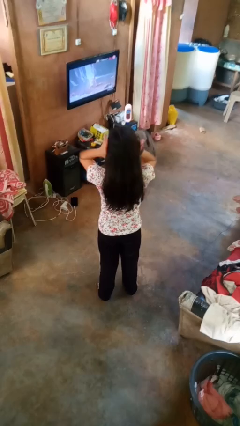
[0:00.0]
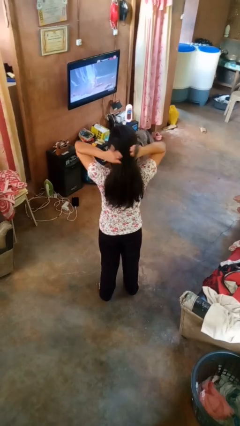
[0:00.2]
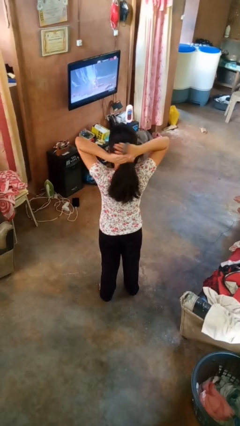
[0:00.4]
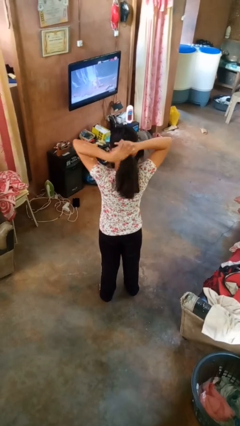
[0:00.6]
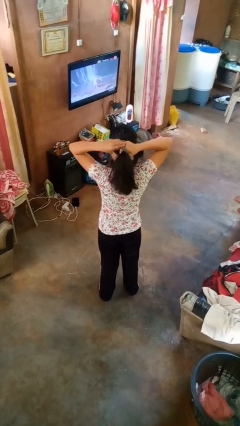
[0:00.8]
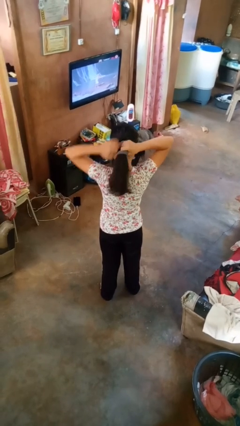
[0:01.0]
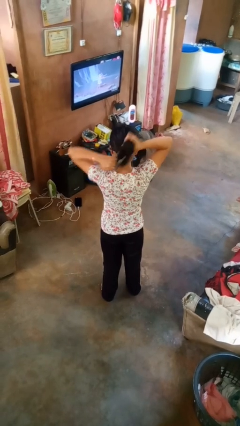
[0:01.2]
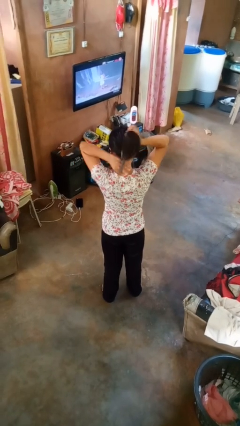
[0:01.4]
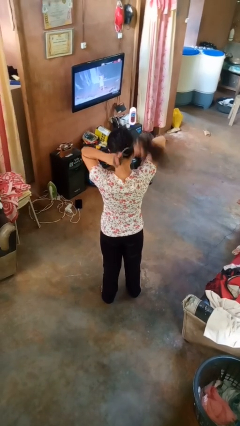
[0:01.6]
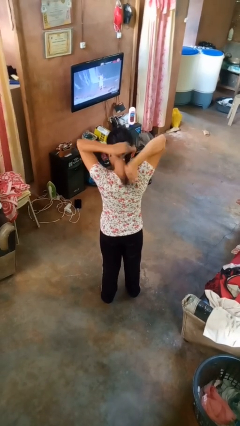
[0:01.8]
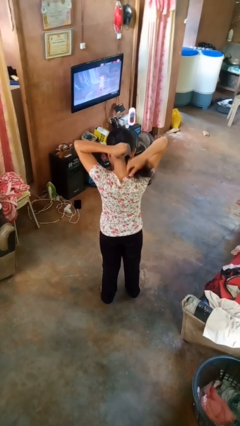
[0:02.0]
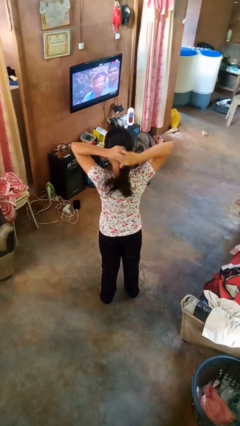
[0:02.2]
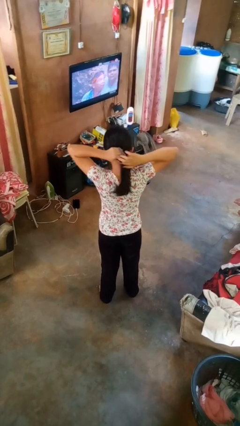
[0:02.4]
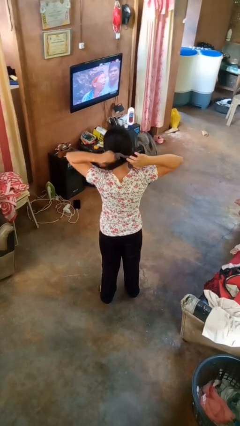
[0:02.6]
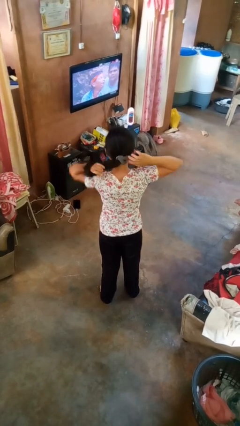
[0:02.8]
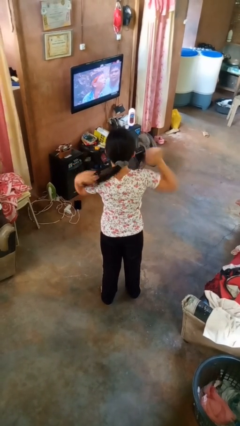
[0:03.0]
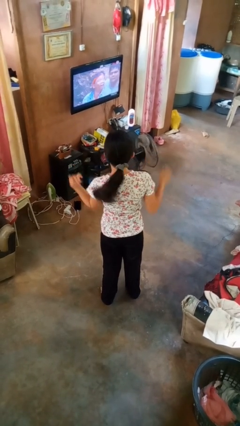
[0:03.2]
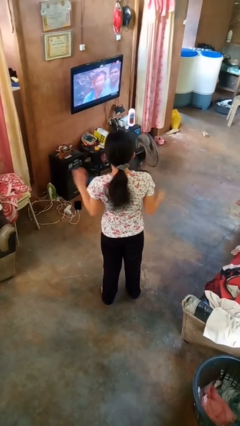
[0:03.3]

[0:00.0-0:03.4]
person puts hair in ponytail

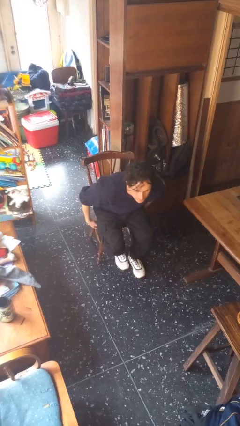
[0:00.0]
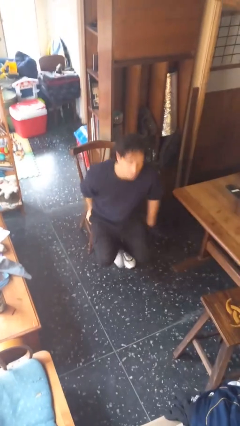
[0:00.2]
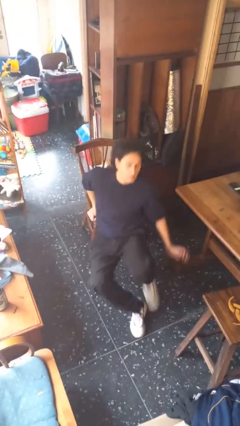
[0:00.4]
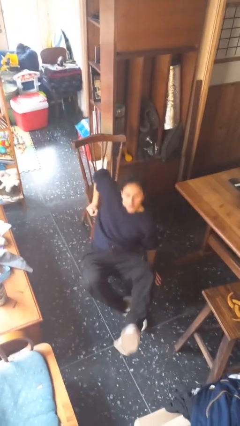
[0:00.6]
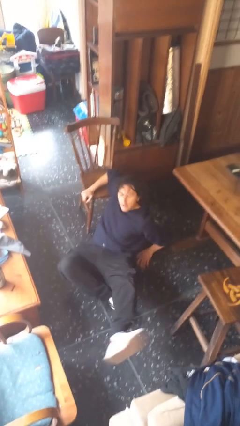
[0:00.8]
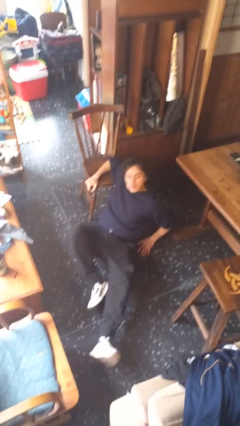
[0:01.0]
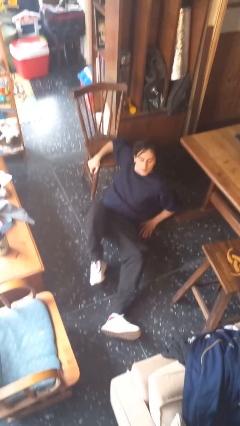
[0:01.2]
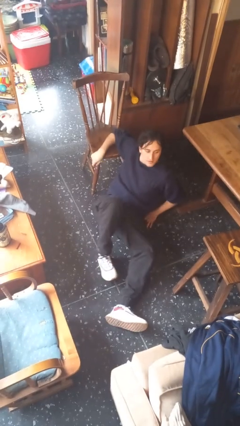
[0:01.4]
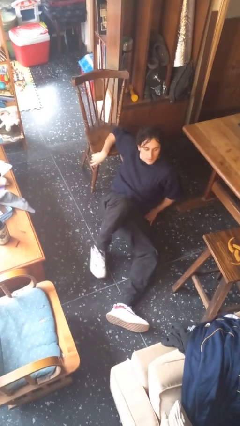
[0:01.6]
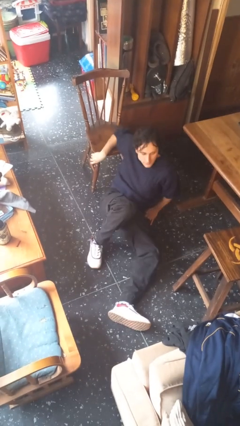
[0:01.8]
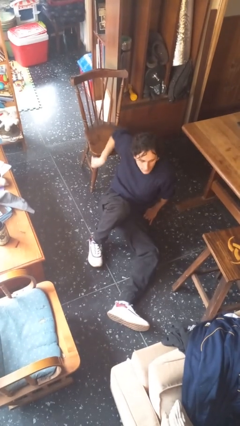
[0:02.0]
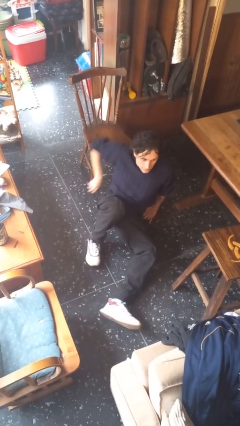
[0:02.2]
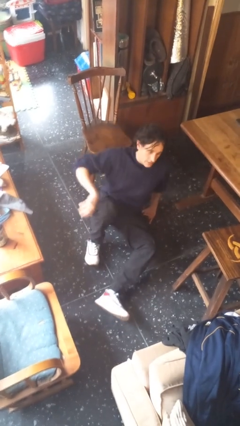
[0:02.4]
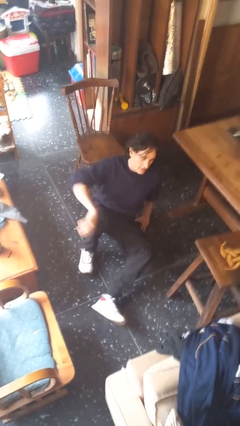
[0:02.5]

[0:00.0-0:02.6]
person falls from chair

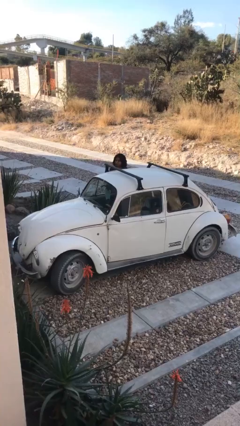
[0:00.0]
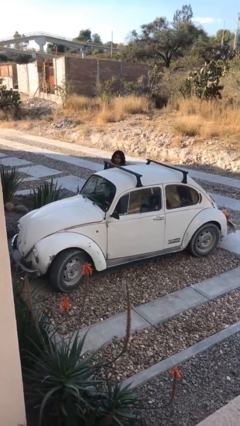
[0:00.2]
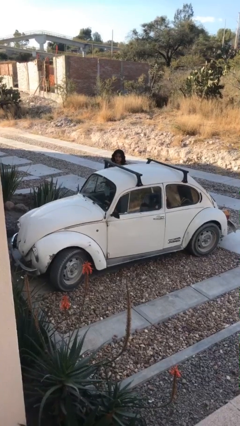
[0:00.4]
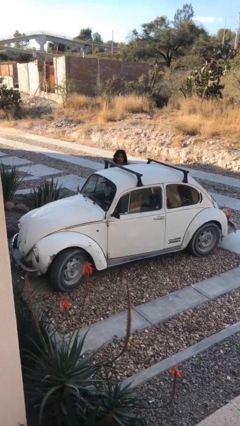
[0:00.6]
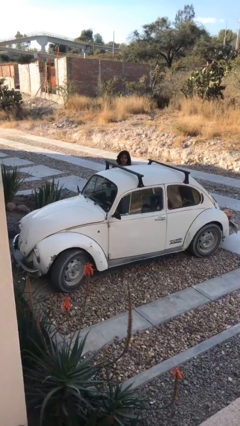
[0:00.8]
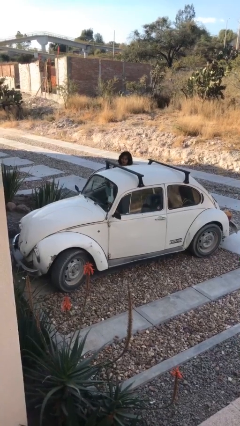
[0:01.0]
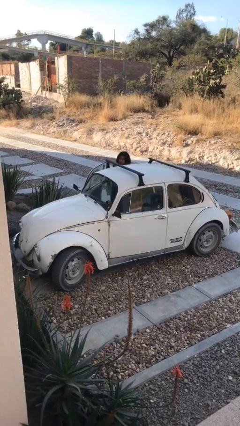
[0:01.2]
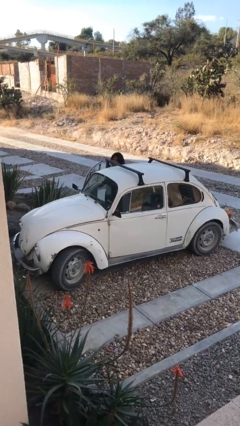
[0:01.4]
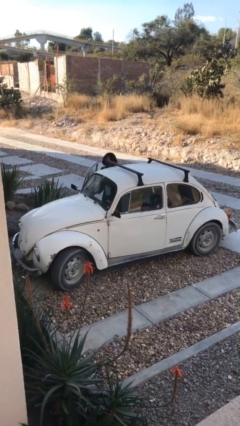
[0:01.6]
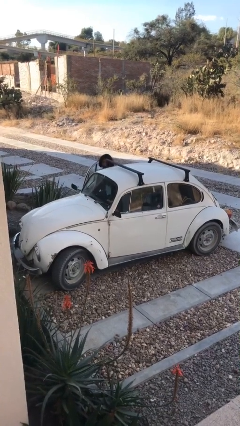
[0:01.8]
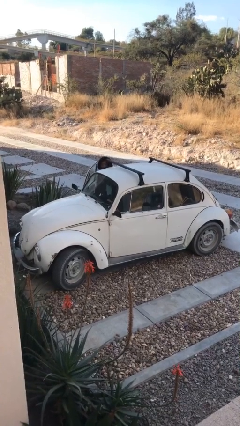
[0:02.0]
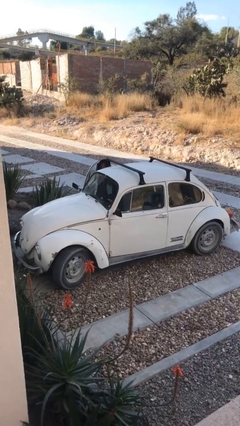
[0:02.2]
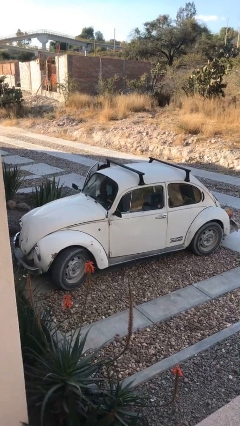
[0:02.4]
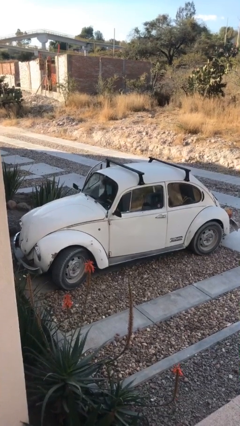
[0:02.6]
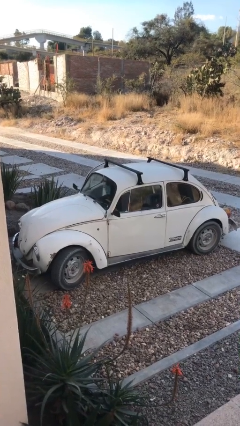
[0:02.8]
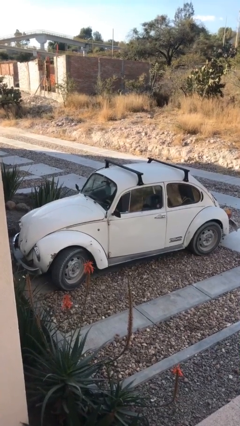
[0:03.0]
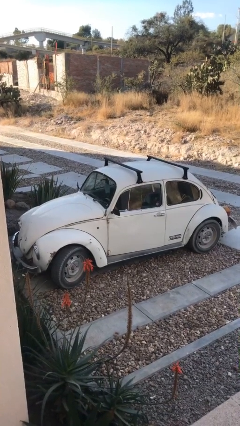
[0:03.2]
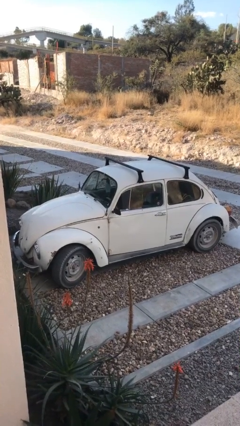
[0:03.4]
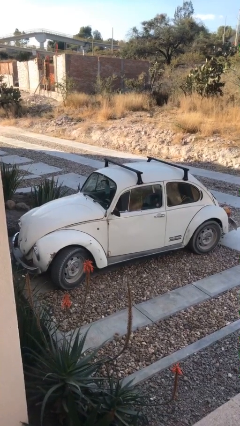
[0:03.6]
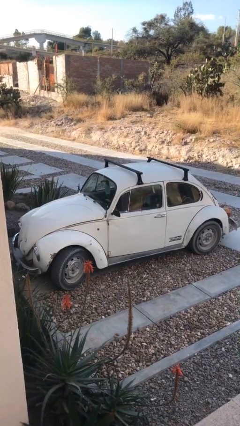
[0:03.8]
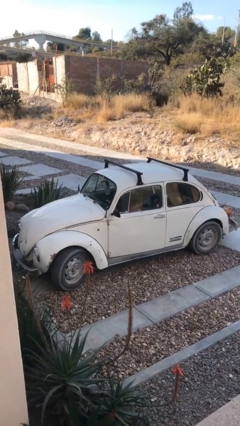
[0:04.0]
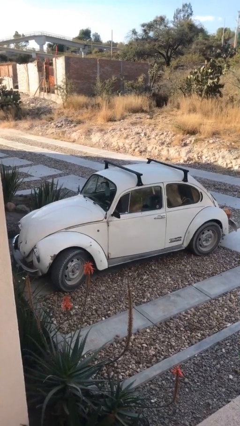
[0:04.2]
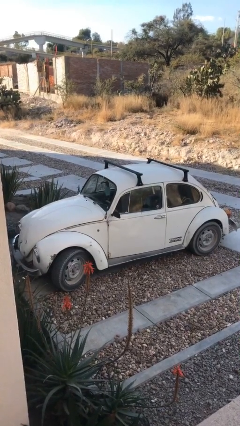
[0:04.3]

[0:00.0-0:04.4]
car picks up person

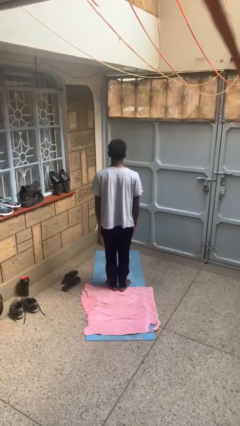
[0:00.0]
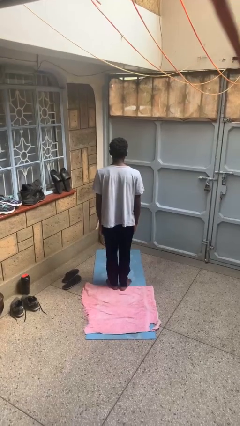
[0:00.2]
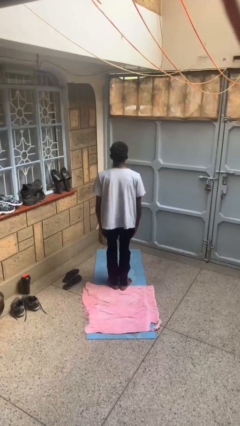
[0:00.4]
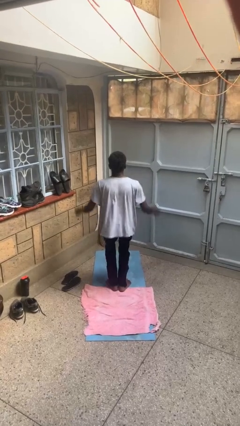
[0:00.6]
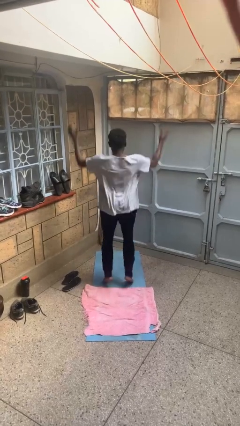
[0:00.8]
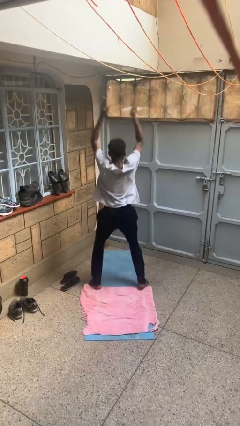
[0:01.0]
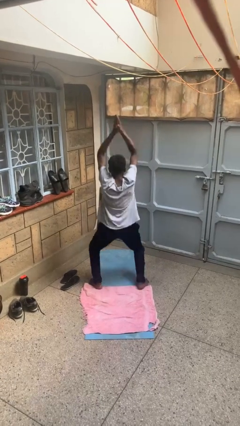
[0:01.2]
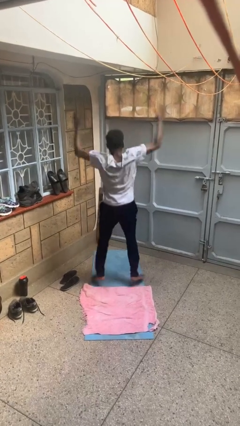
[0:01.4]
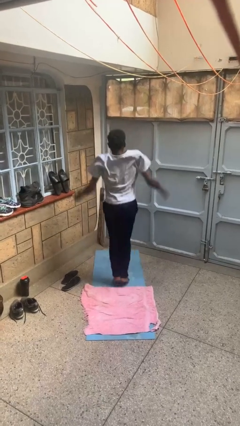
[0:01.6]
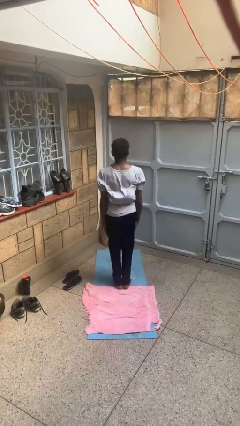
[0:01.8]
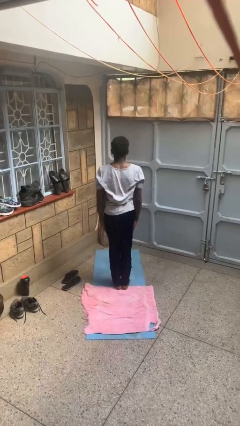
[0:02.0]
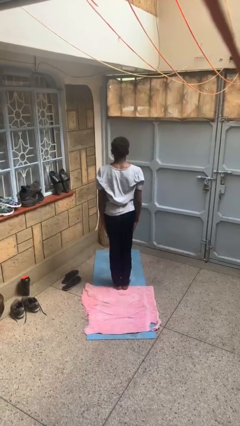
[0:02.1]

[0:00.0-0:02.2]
person exercises with jumping jacks

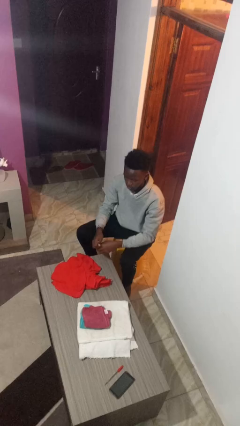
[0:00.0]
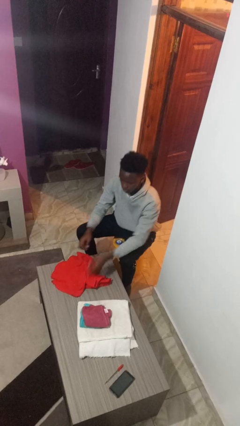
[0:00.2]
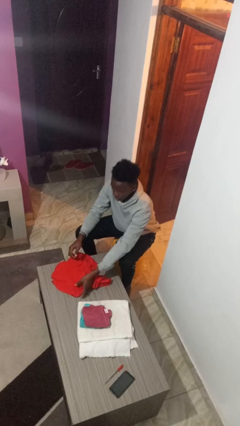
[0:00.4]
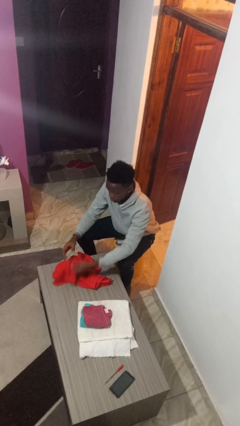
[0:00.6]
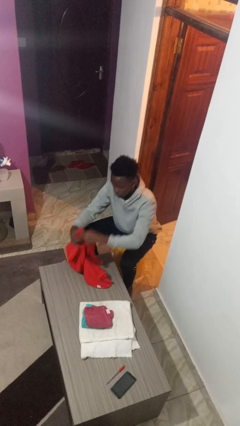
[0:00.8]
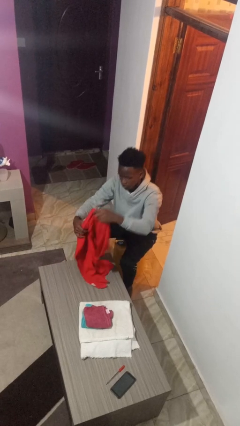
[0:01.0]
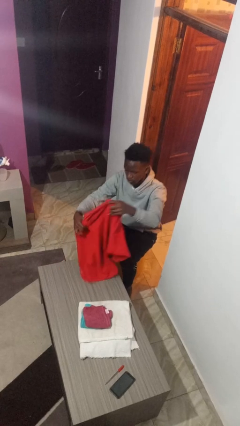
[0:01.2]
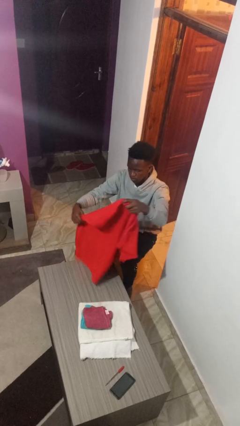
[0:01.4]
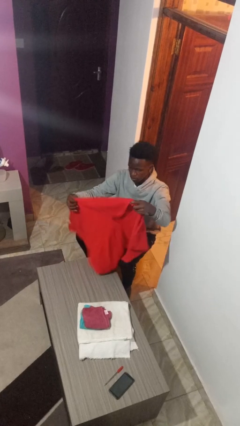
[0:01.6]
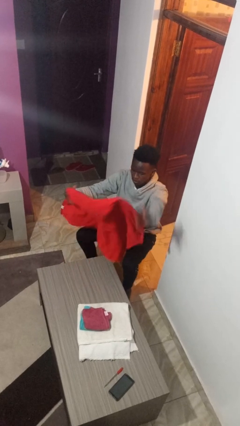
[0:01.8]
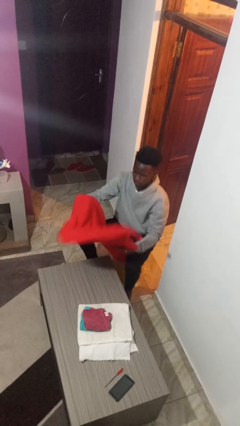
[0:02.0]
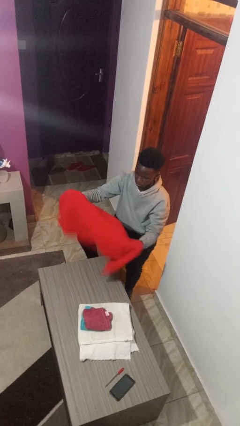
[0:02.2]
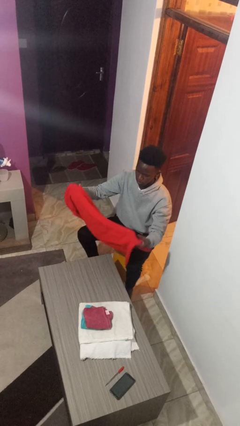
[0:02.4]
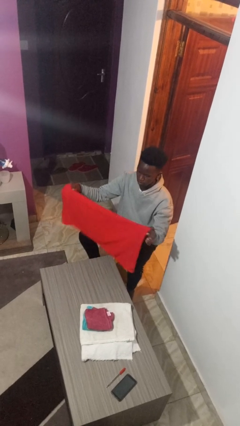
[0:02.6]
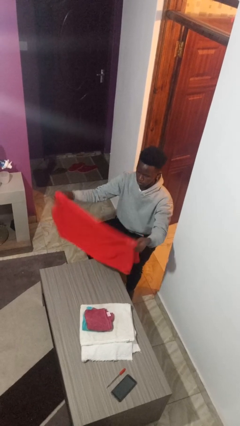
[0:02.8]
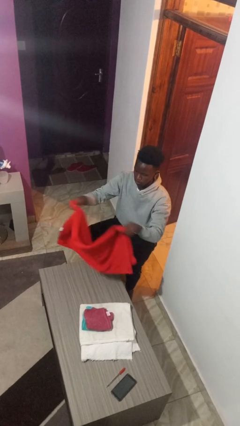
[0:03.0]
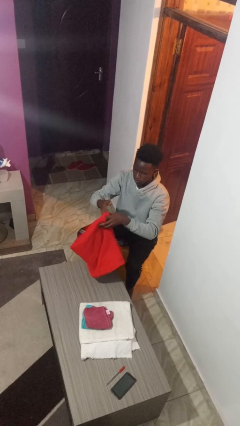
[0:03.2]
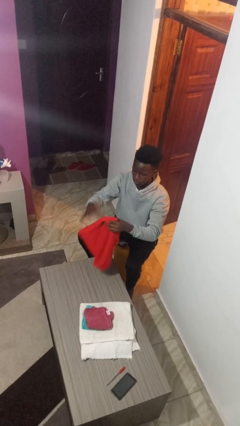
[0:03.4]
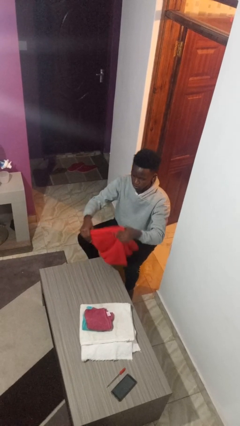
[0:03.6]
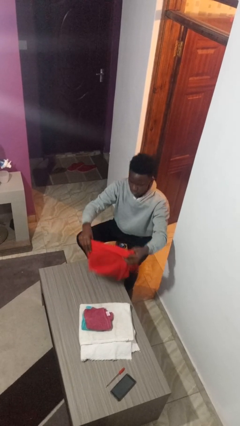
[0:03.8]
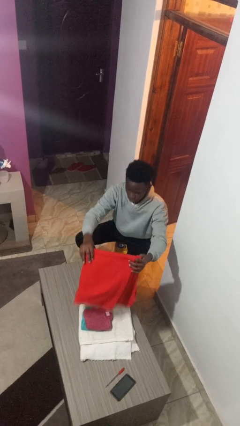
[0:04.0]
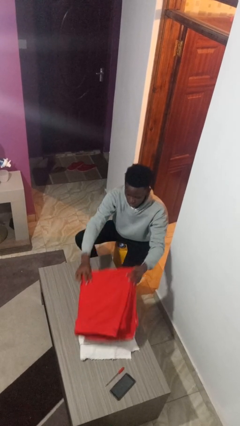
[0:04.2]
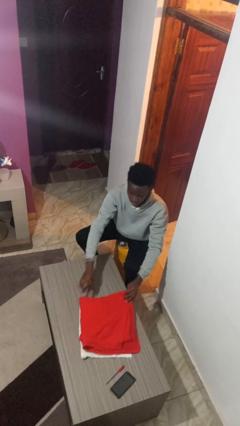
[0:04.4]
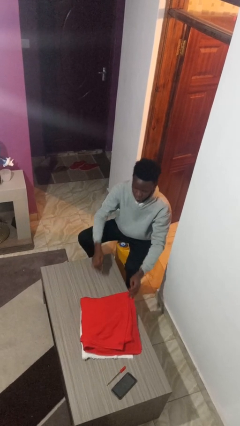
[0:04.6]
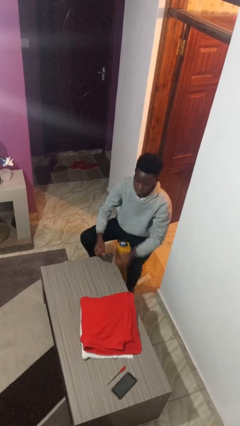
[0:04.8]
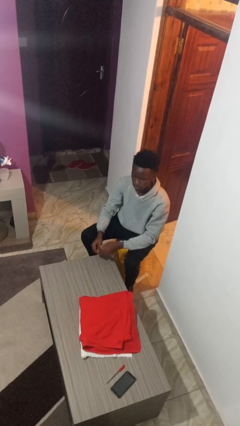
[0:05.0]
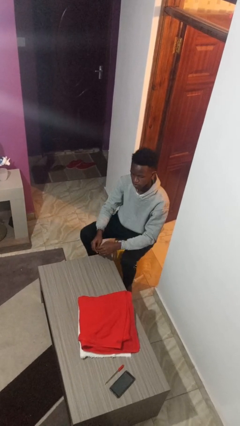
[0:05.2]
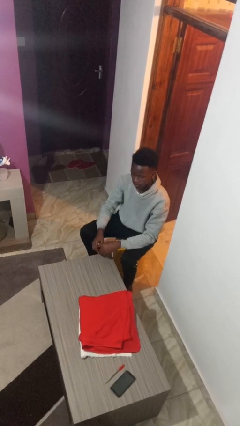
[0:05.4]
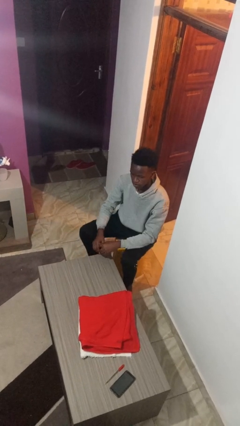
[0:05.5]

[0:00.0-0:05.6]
person folds towel
